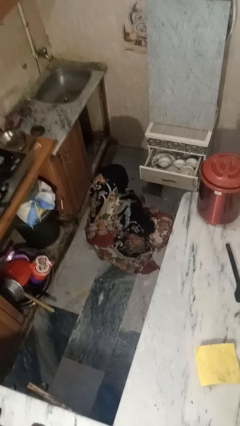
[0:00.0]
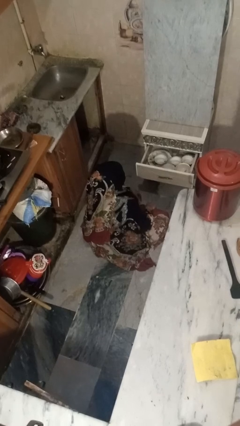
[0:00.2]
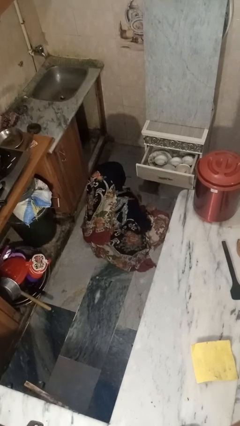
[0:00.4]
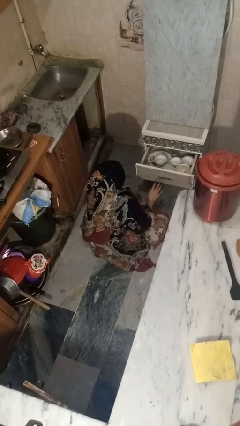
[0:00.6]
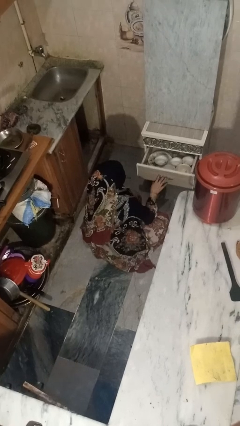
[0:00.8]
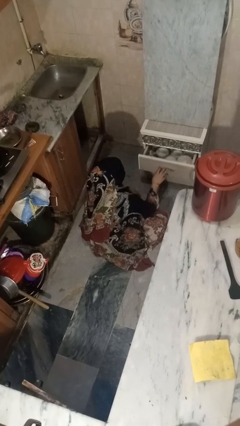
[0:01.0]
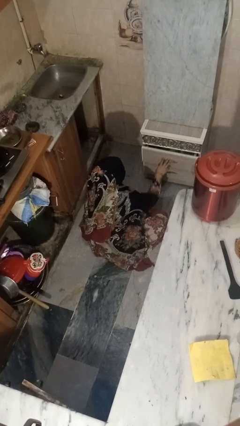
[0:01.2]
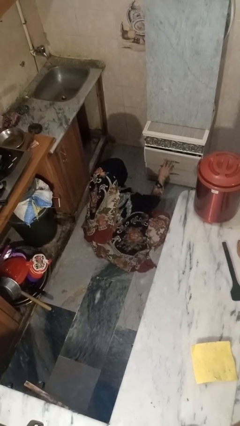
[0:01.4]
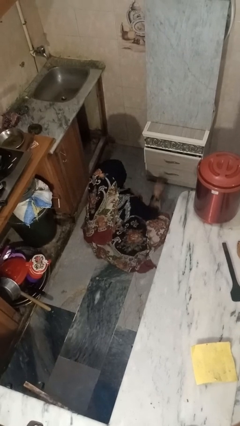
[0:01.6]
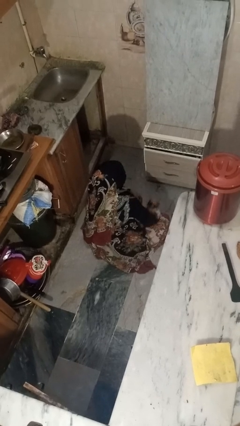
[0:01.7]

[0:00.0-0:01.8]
person closes kitchen drawer

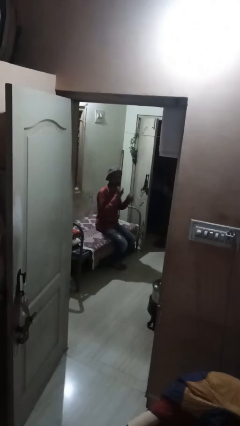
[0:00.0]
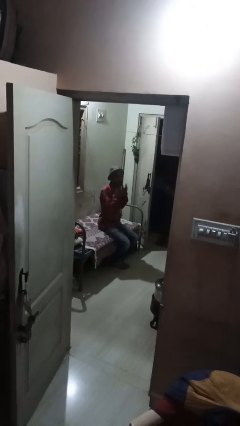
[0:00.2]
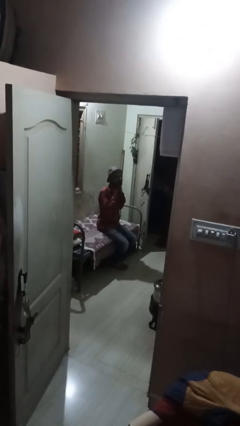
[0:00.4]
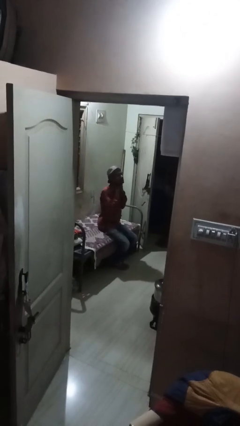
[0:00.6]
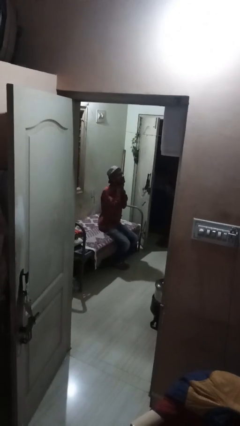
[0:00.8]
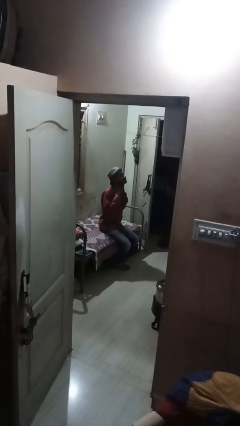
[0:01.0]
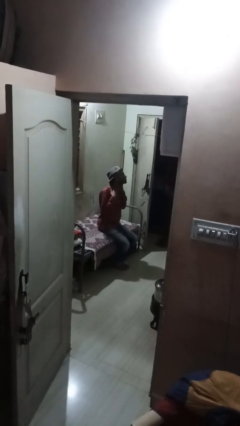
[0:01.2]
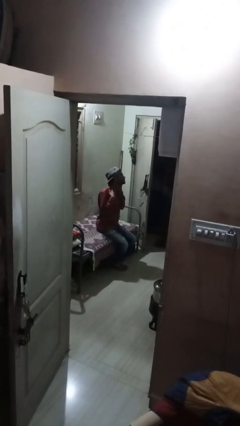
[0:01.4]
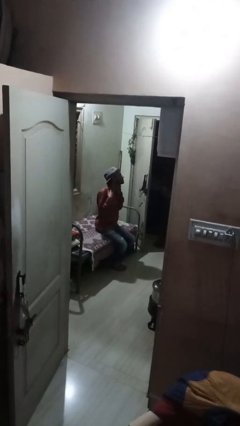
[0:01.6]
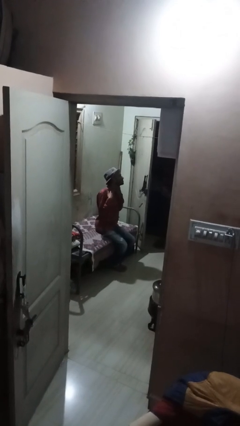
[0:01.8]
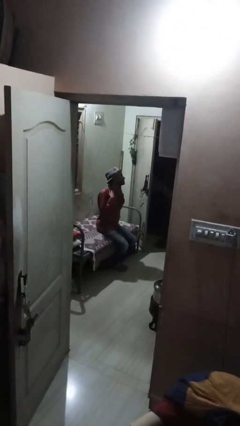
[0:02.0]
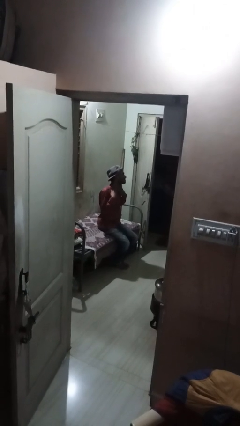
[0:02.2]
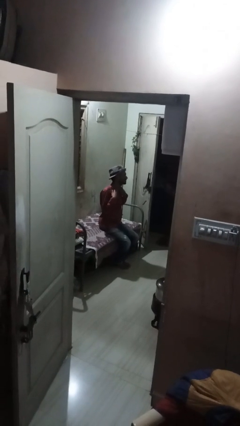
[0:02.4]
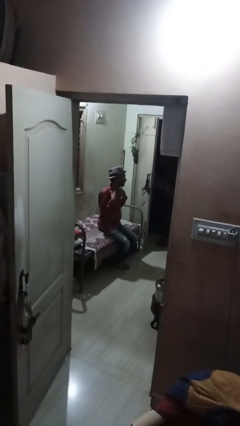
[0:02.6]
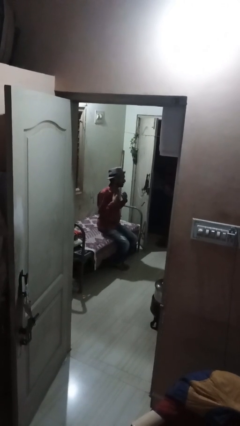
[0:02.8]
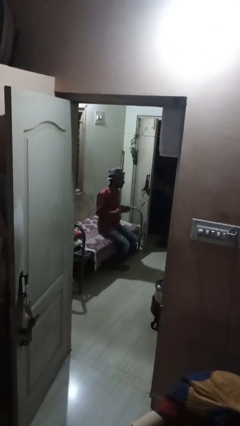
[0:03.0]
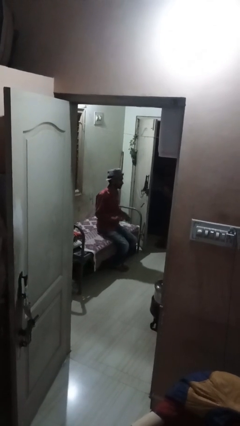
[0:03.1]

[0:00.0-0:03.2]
person rubs neck

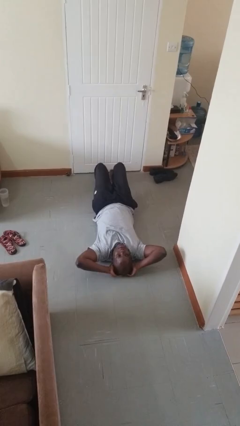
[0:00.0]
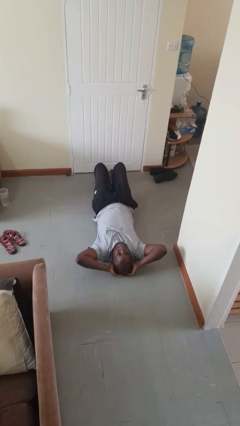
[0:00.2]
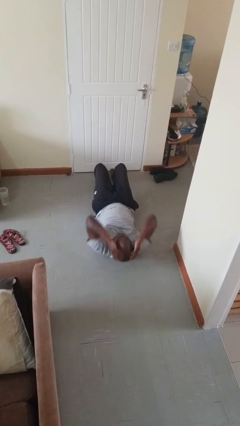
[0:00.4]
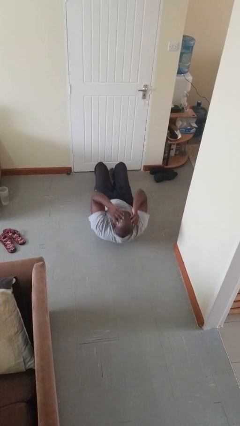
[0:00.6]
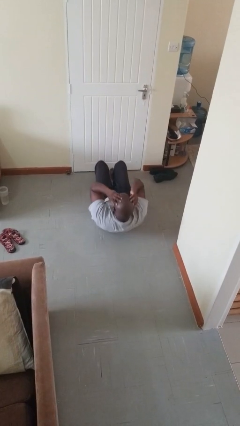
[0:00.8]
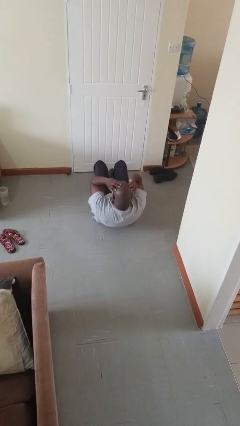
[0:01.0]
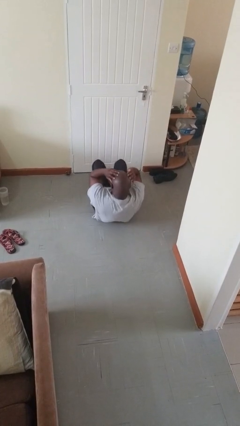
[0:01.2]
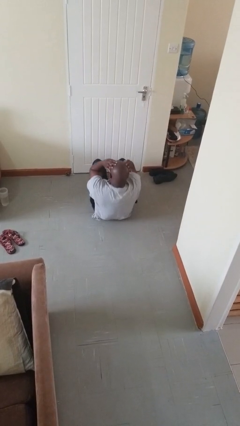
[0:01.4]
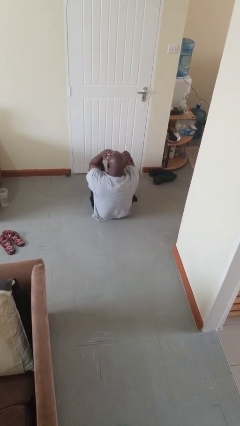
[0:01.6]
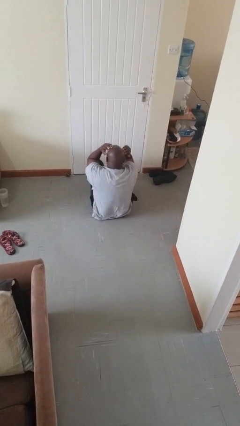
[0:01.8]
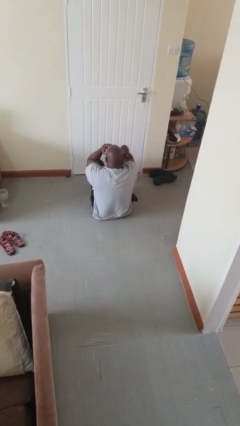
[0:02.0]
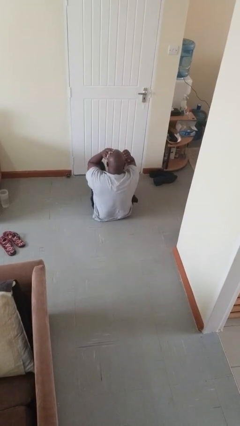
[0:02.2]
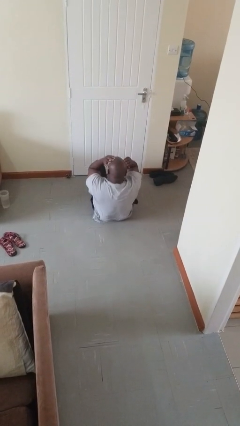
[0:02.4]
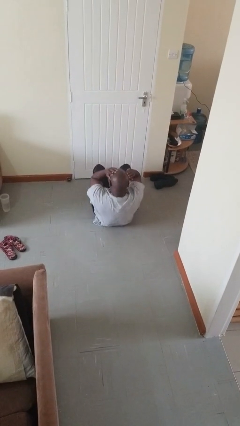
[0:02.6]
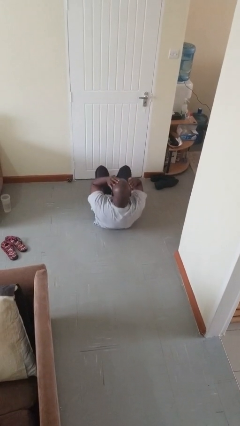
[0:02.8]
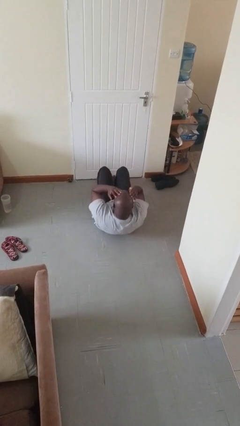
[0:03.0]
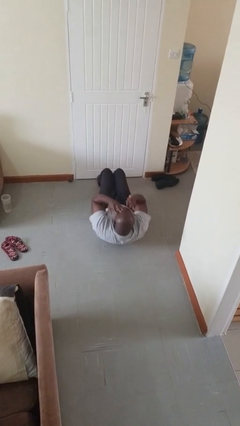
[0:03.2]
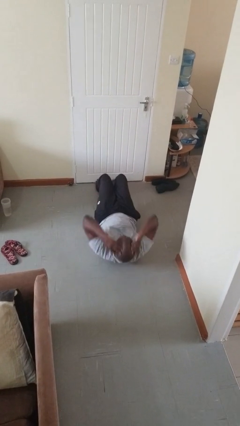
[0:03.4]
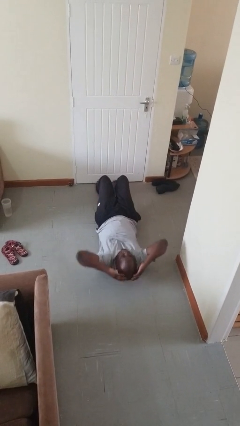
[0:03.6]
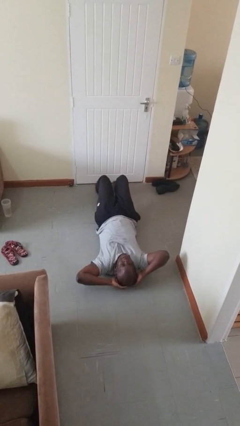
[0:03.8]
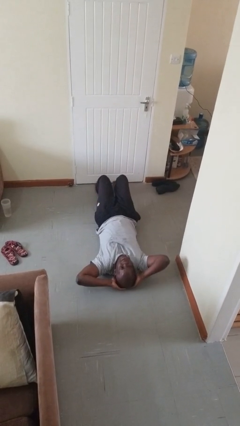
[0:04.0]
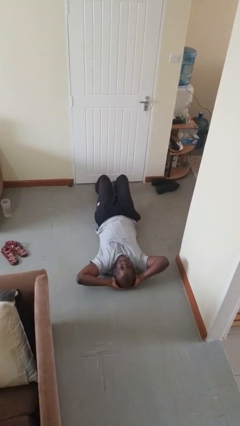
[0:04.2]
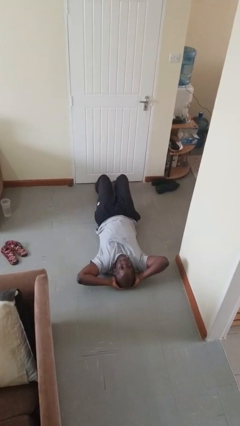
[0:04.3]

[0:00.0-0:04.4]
person exercises with situp

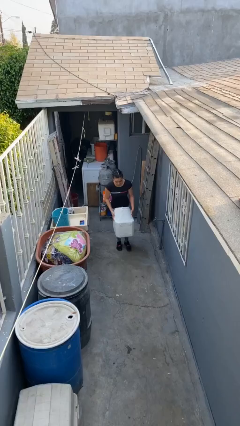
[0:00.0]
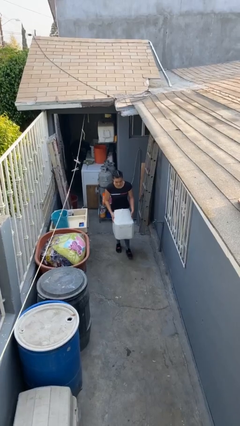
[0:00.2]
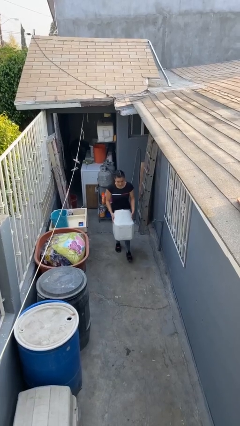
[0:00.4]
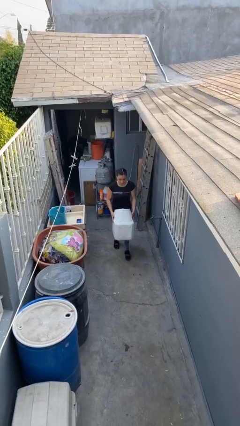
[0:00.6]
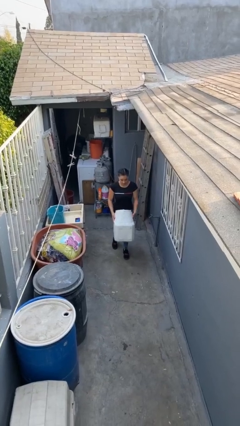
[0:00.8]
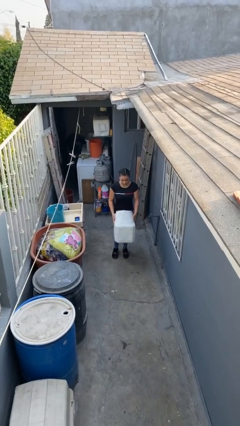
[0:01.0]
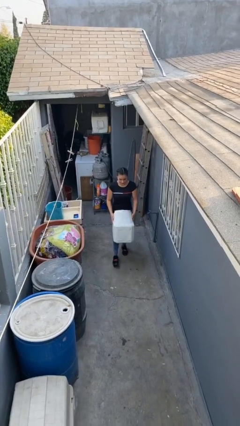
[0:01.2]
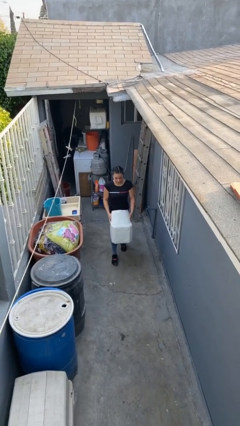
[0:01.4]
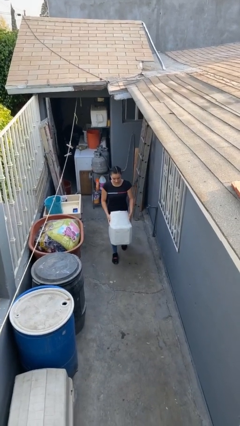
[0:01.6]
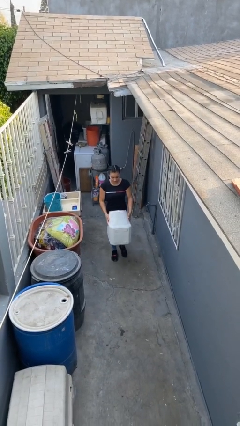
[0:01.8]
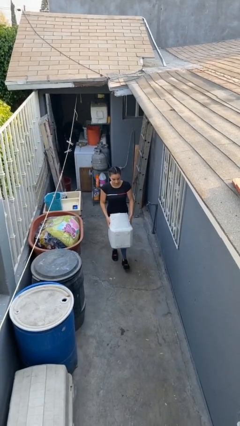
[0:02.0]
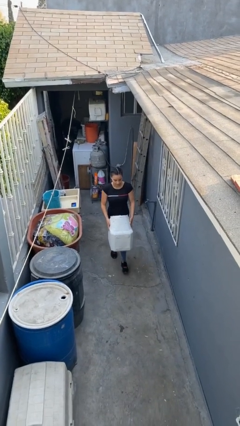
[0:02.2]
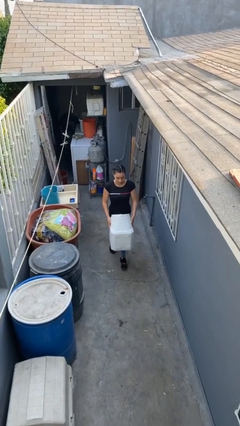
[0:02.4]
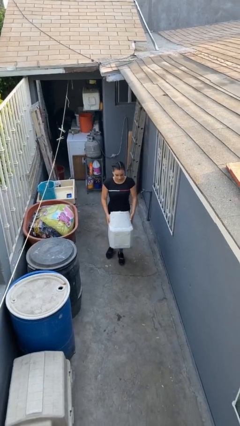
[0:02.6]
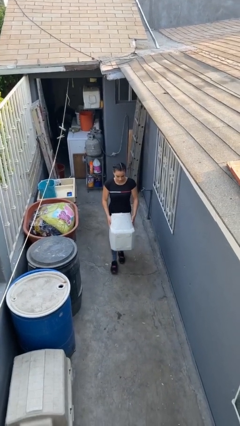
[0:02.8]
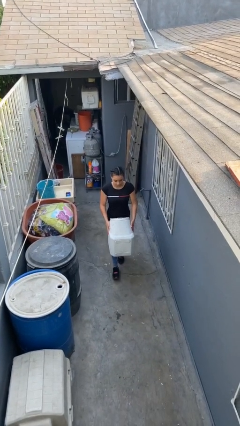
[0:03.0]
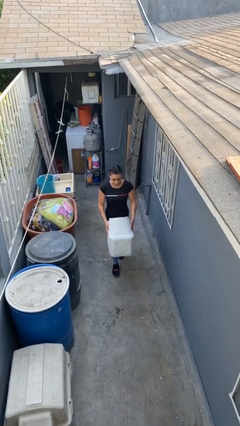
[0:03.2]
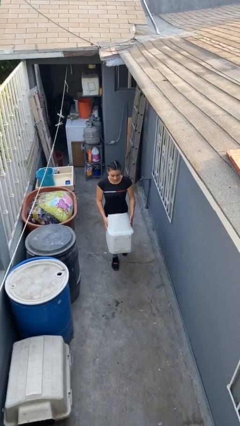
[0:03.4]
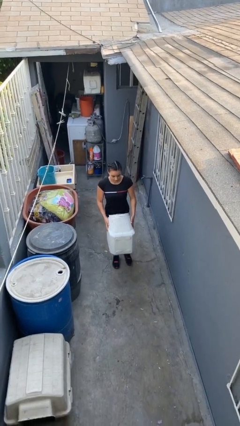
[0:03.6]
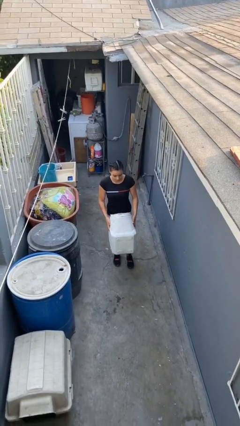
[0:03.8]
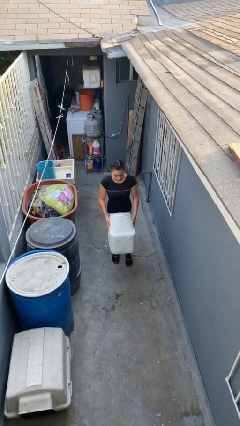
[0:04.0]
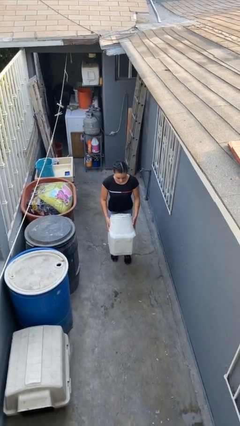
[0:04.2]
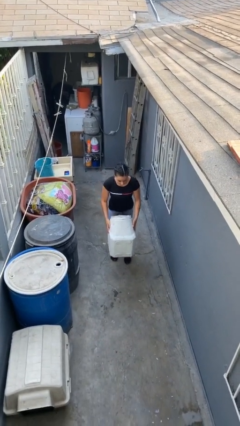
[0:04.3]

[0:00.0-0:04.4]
person carries heavy object

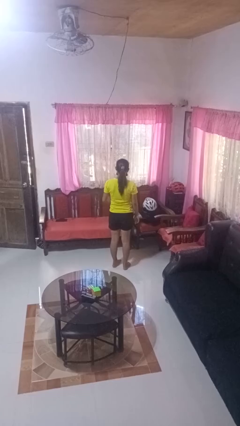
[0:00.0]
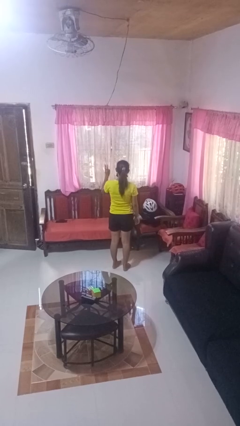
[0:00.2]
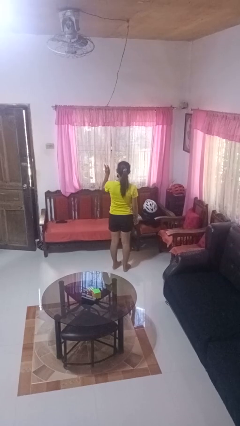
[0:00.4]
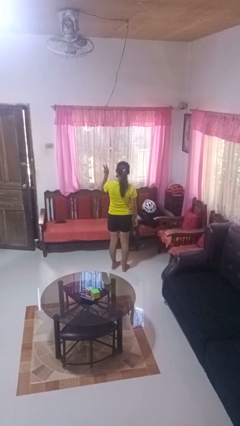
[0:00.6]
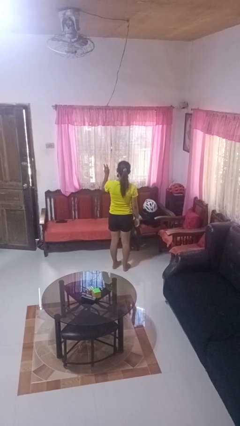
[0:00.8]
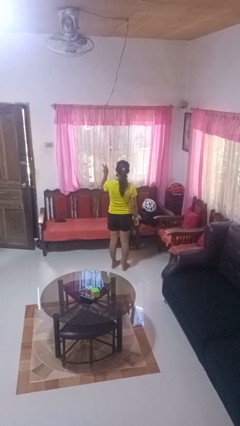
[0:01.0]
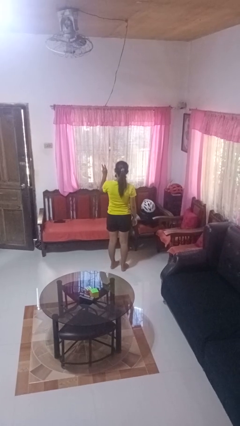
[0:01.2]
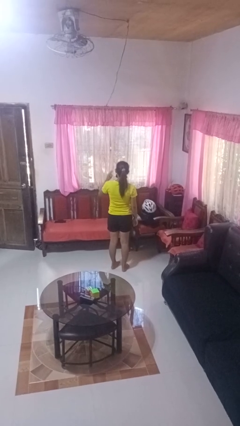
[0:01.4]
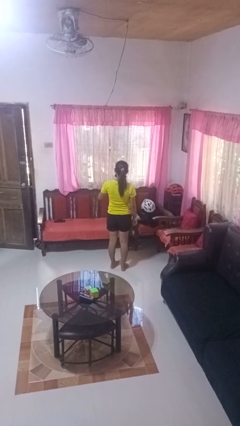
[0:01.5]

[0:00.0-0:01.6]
person gestures number three

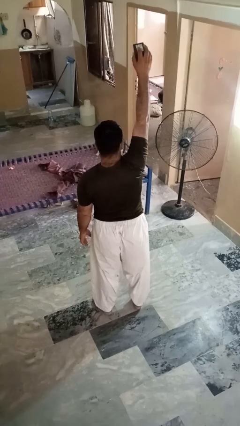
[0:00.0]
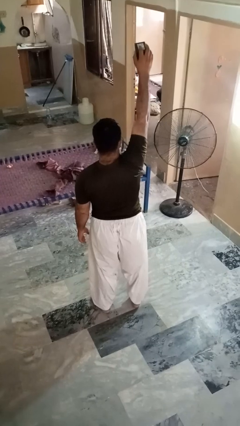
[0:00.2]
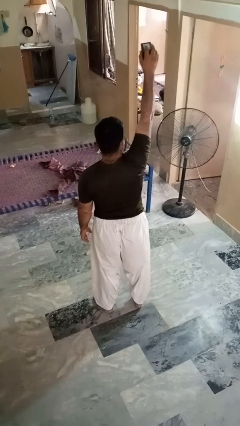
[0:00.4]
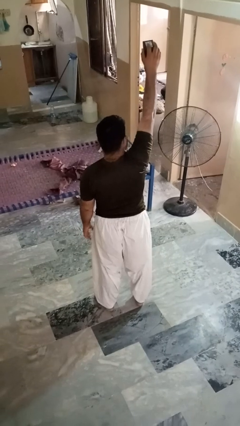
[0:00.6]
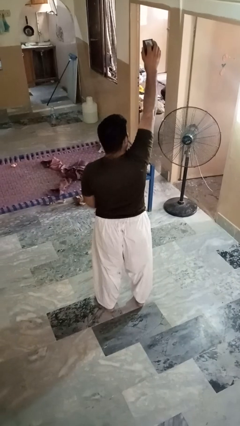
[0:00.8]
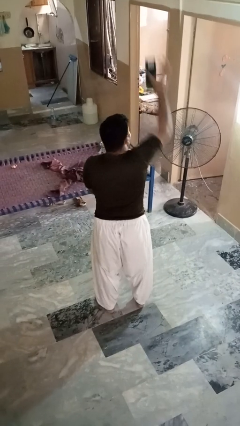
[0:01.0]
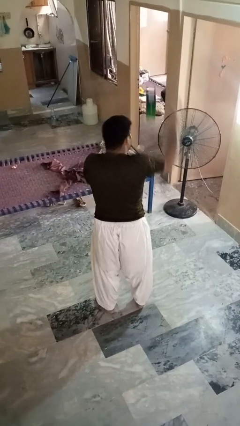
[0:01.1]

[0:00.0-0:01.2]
person drops object

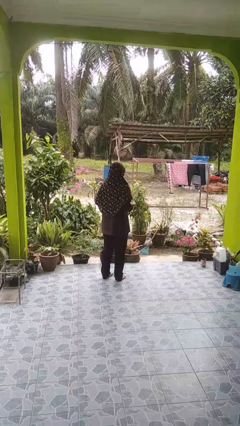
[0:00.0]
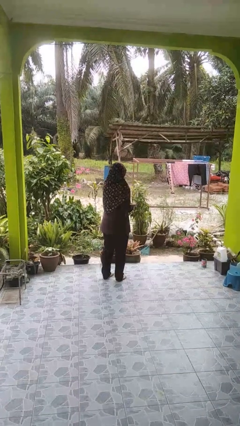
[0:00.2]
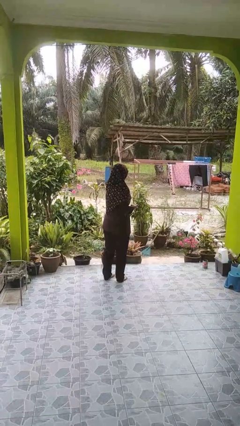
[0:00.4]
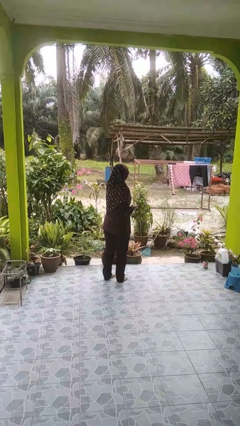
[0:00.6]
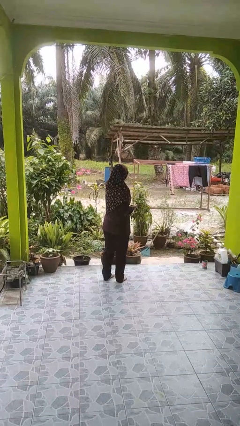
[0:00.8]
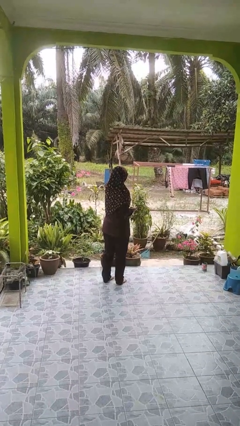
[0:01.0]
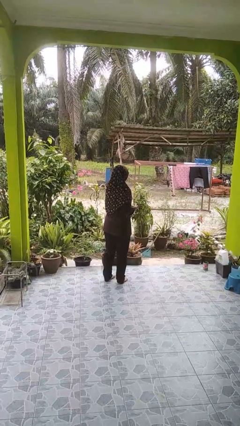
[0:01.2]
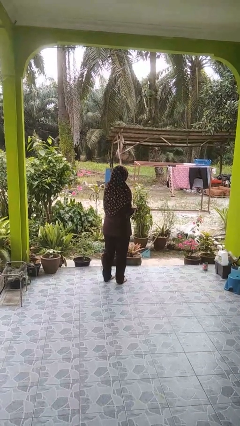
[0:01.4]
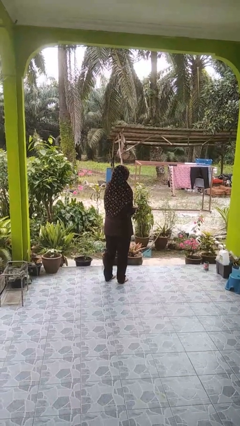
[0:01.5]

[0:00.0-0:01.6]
person punches
